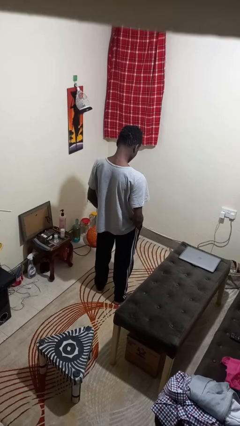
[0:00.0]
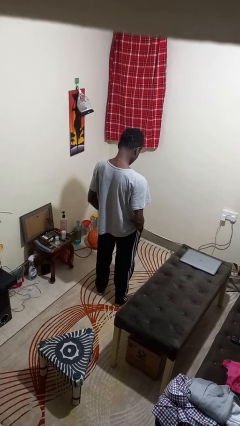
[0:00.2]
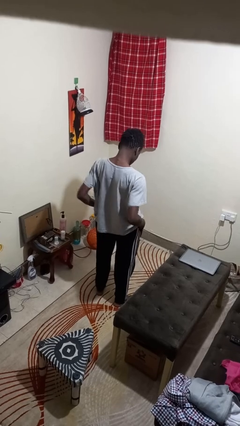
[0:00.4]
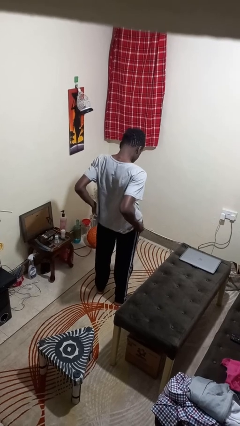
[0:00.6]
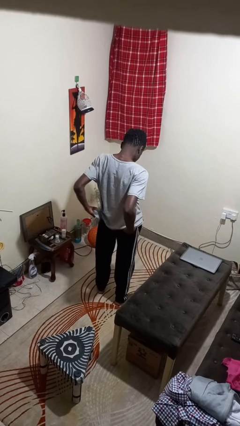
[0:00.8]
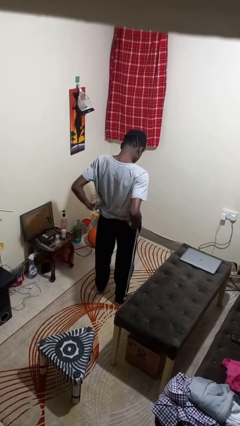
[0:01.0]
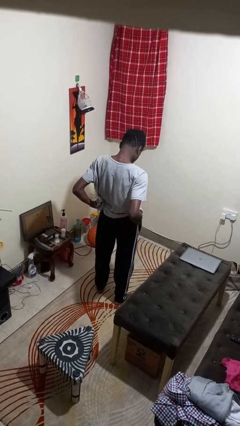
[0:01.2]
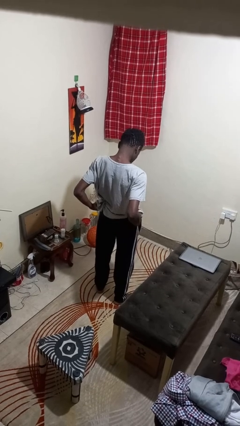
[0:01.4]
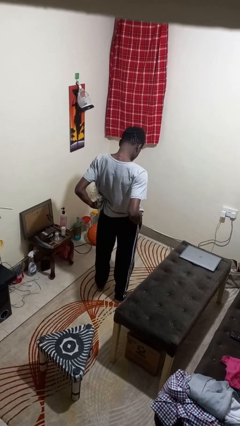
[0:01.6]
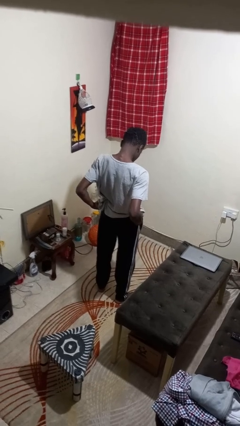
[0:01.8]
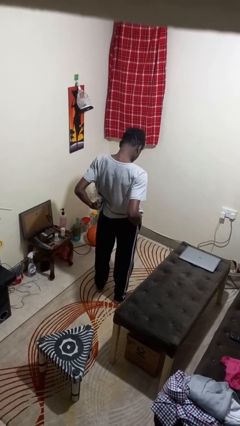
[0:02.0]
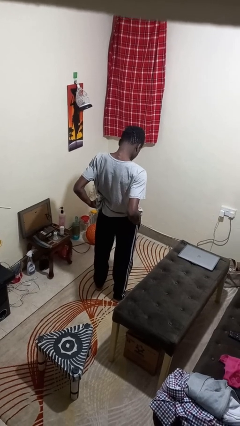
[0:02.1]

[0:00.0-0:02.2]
person puts hands in back pockets

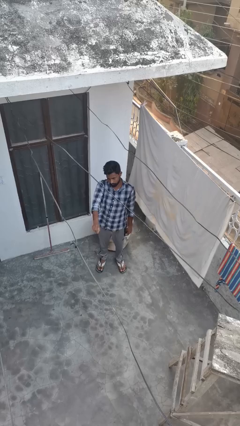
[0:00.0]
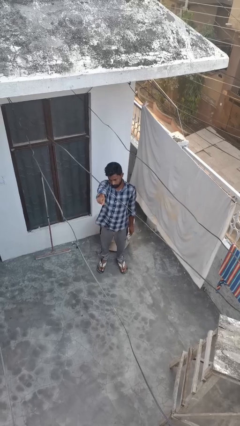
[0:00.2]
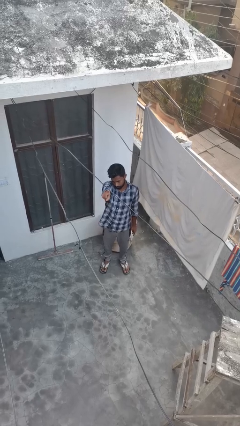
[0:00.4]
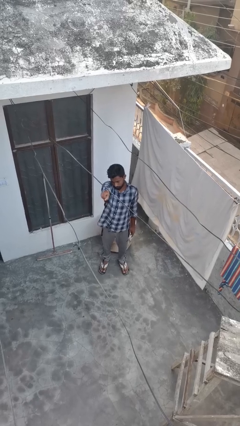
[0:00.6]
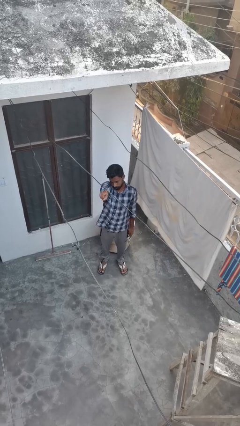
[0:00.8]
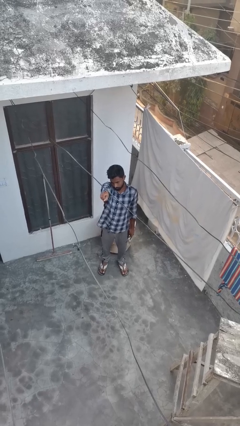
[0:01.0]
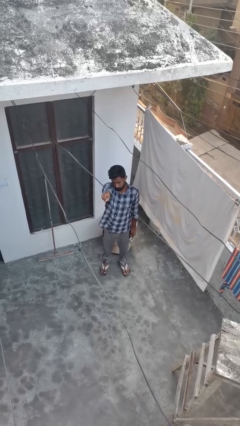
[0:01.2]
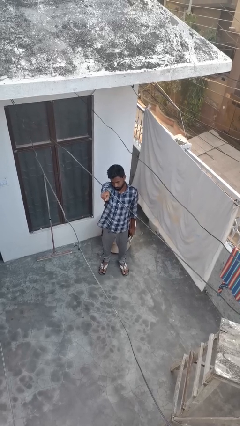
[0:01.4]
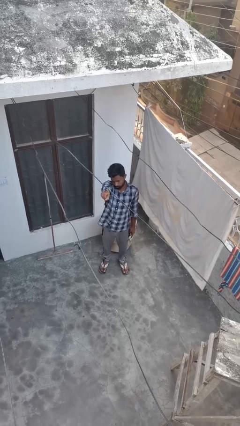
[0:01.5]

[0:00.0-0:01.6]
person gestures number one

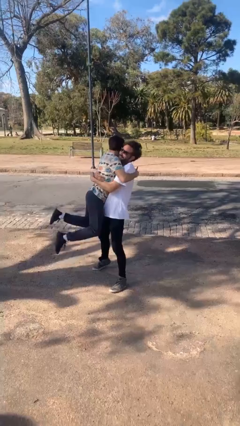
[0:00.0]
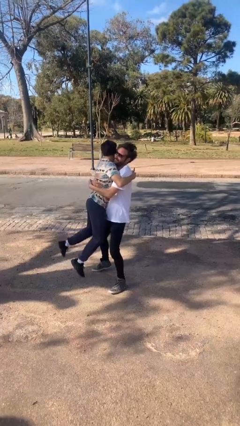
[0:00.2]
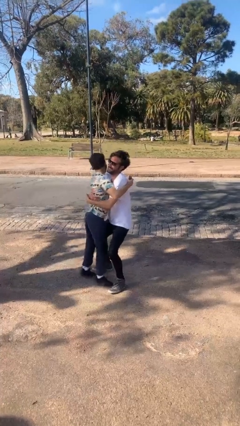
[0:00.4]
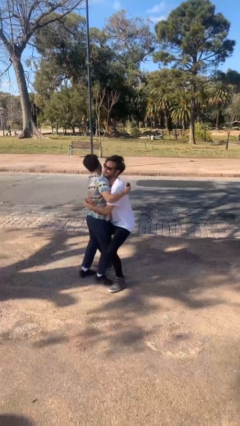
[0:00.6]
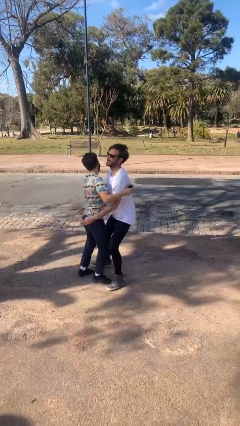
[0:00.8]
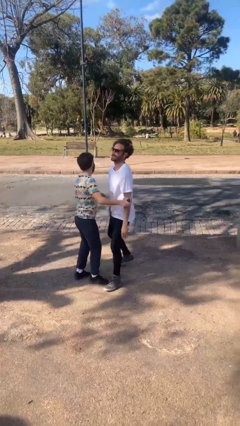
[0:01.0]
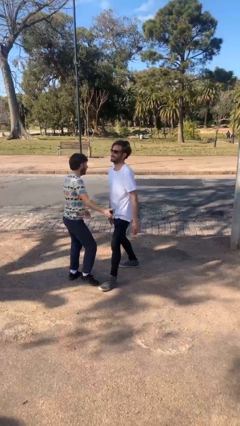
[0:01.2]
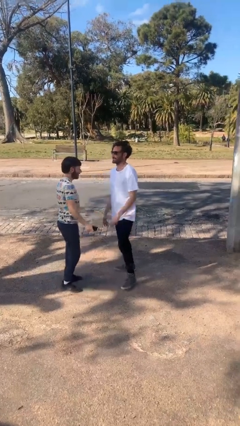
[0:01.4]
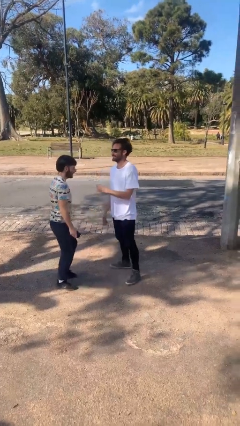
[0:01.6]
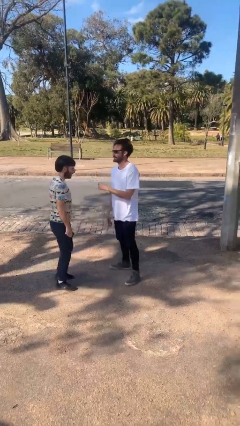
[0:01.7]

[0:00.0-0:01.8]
person puts down person

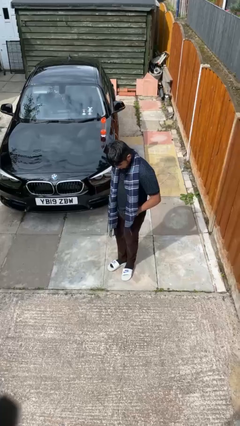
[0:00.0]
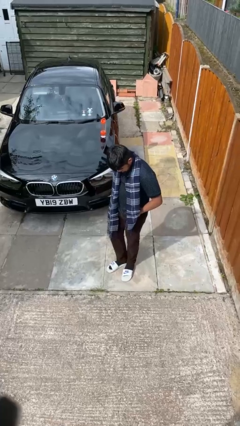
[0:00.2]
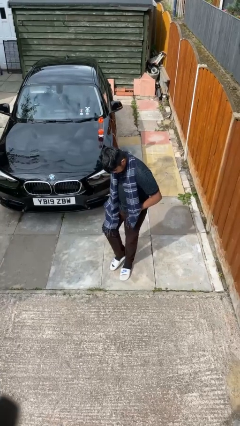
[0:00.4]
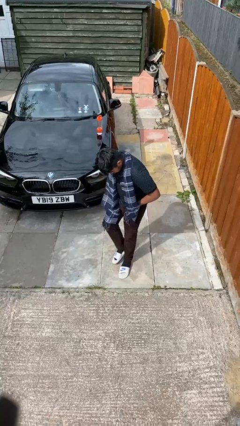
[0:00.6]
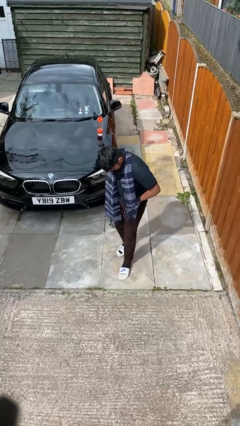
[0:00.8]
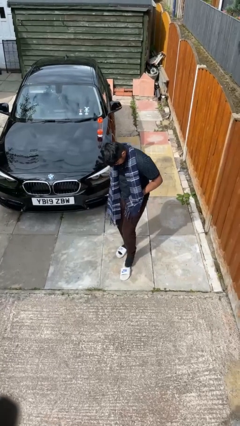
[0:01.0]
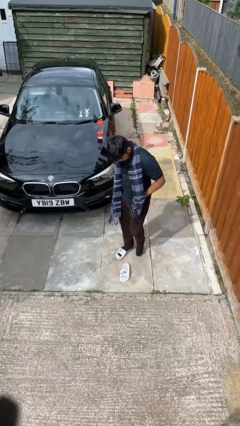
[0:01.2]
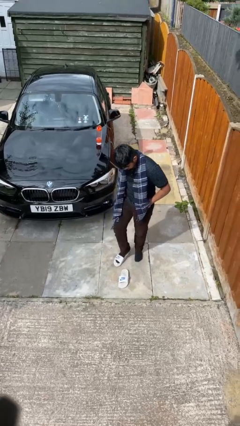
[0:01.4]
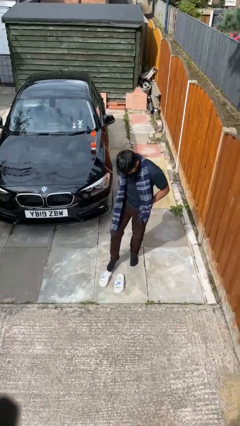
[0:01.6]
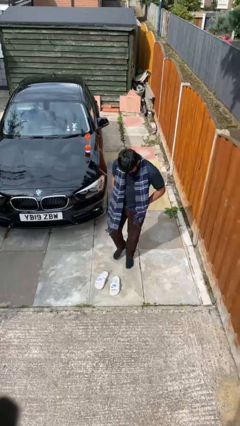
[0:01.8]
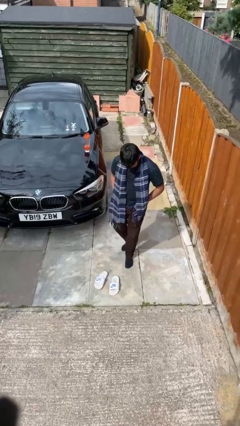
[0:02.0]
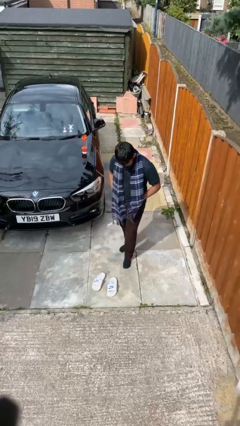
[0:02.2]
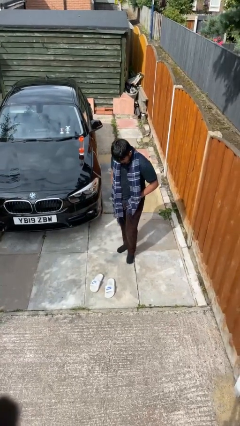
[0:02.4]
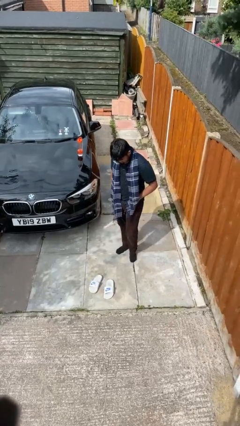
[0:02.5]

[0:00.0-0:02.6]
person takes off shoes

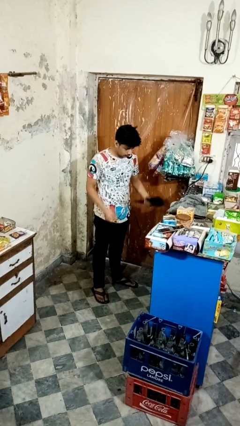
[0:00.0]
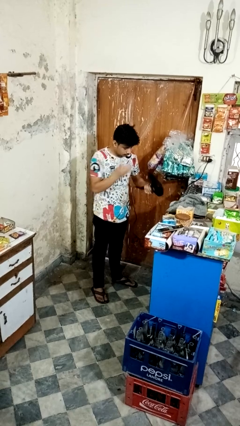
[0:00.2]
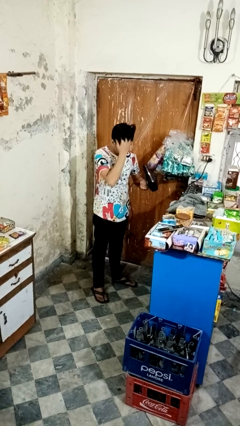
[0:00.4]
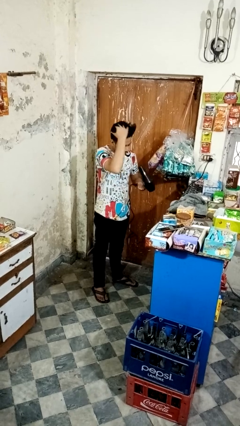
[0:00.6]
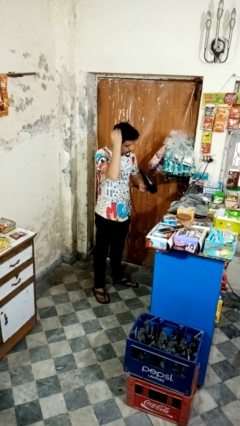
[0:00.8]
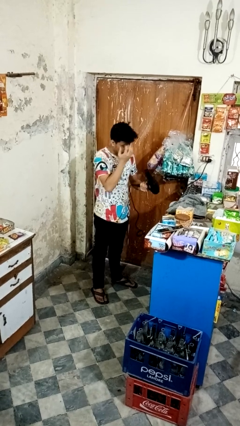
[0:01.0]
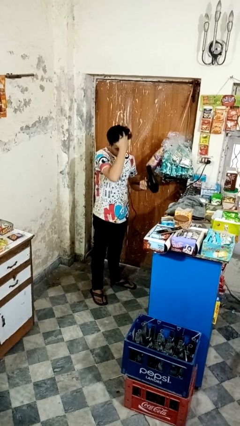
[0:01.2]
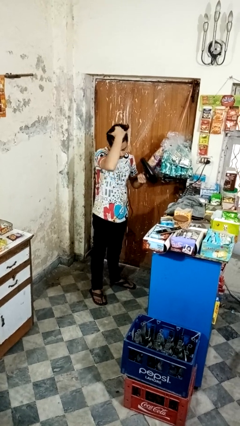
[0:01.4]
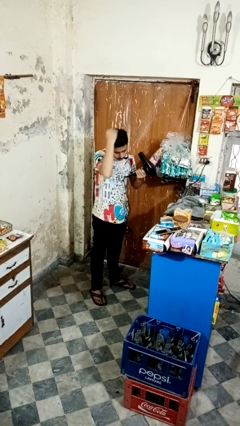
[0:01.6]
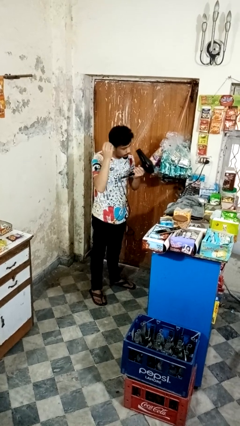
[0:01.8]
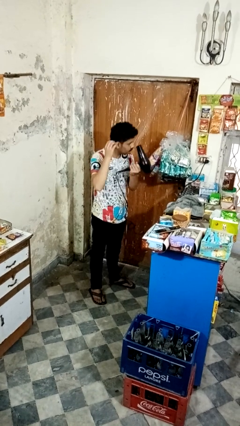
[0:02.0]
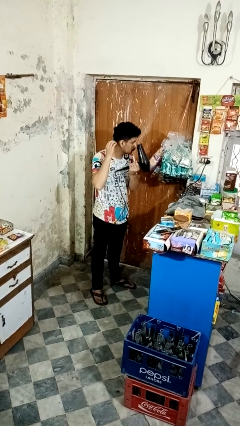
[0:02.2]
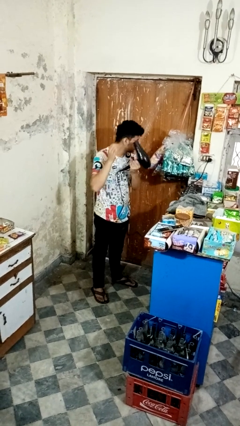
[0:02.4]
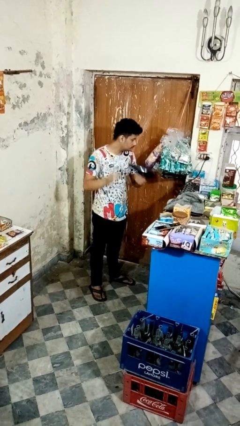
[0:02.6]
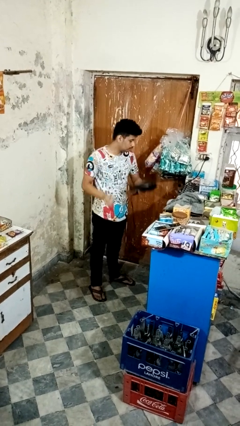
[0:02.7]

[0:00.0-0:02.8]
person dries hair with hairdryer

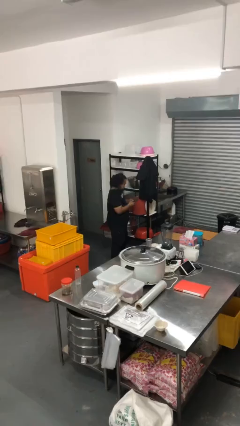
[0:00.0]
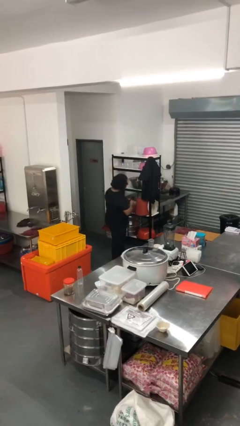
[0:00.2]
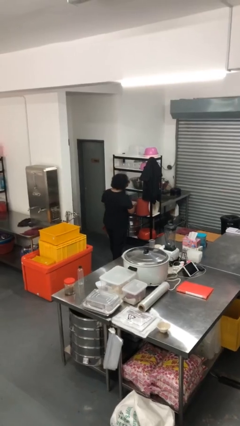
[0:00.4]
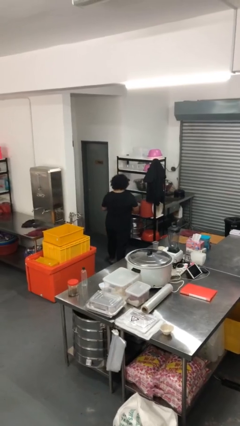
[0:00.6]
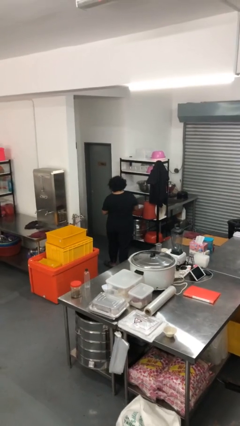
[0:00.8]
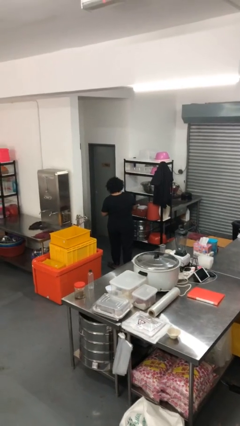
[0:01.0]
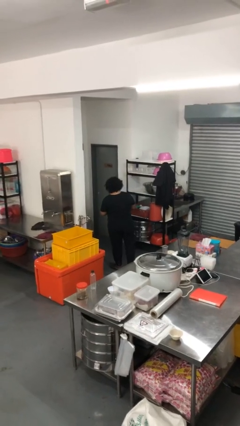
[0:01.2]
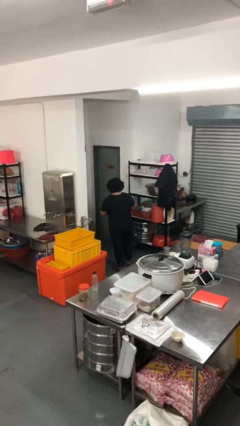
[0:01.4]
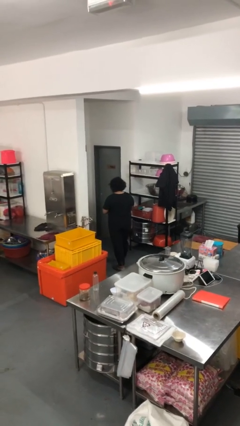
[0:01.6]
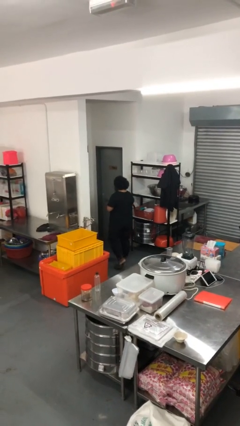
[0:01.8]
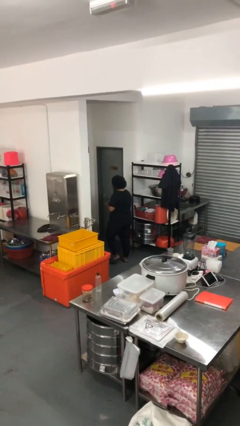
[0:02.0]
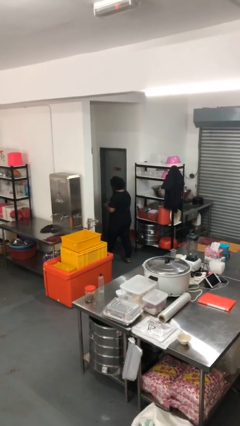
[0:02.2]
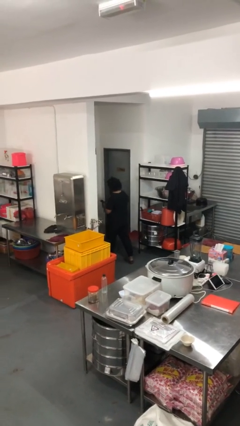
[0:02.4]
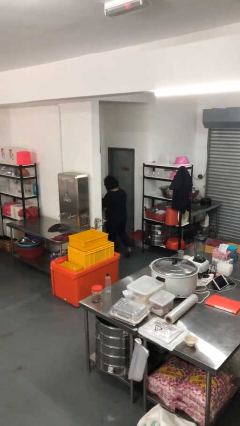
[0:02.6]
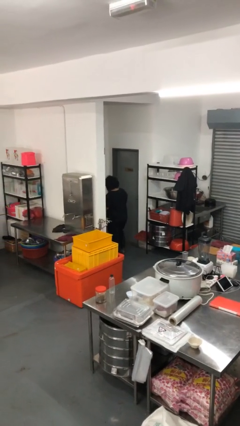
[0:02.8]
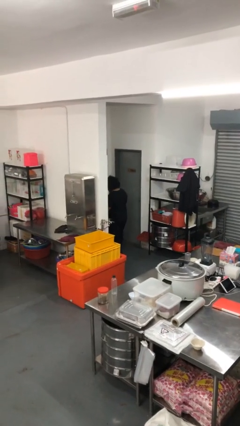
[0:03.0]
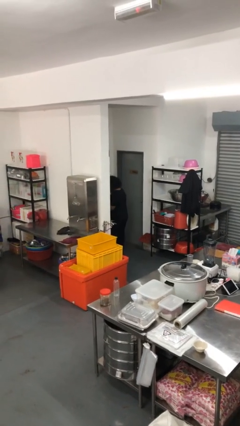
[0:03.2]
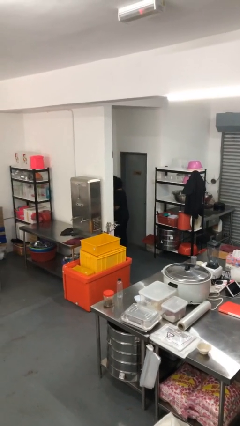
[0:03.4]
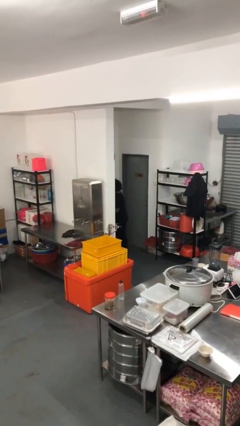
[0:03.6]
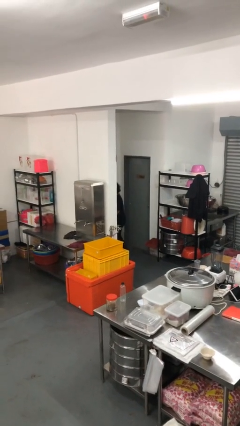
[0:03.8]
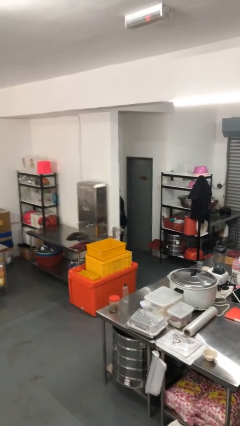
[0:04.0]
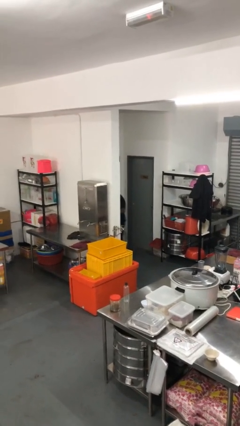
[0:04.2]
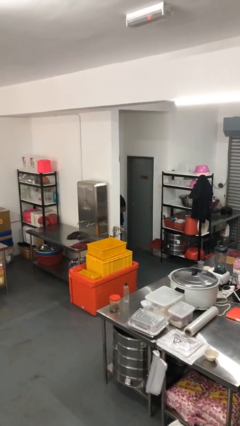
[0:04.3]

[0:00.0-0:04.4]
person exits scene through structure

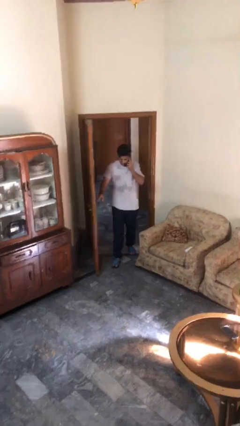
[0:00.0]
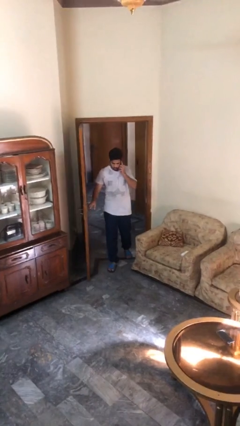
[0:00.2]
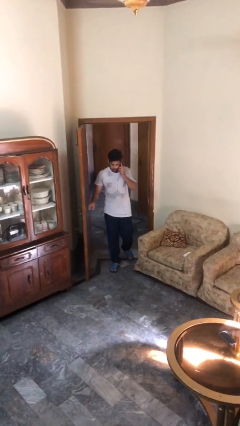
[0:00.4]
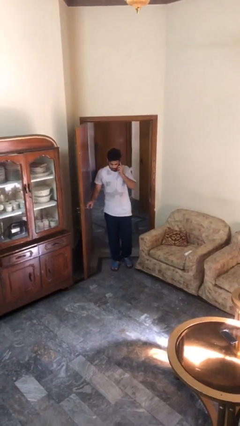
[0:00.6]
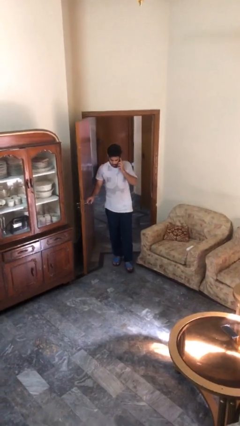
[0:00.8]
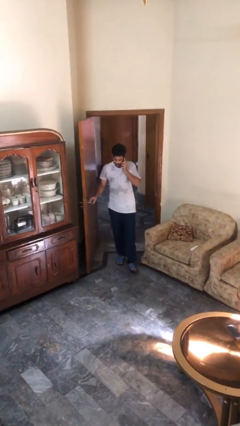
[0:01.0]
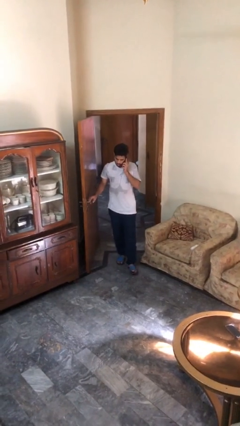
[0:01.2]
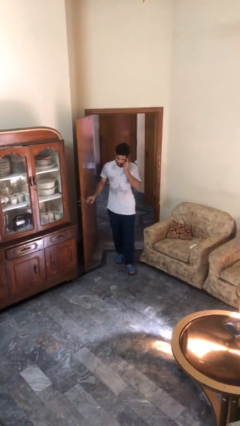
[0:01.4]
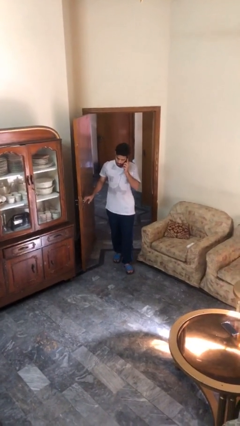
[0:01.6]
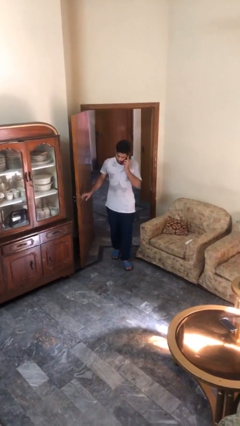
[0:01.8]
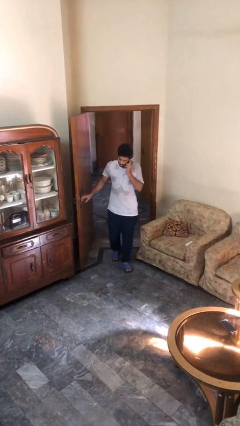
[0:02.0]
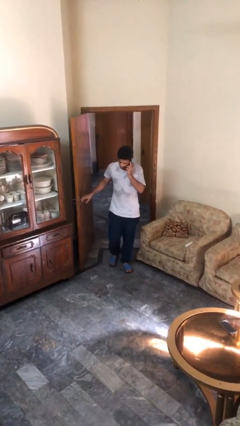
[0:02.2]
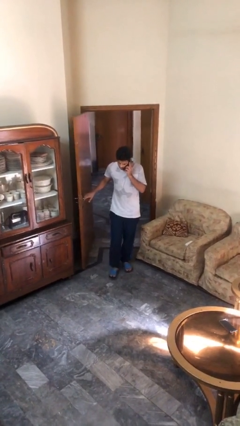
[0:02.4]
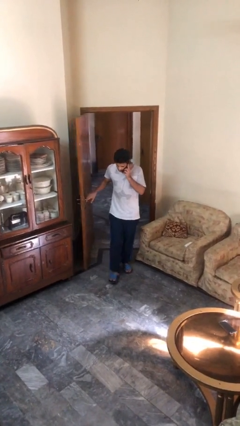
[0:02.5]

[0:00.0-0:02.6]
person enters scene through structure
